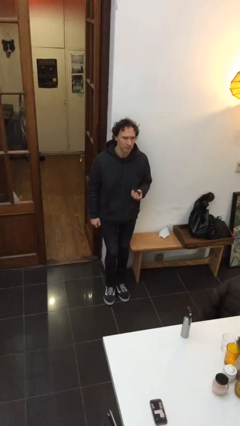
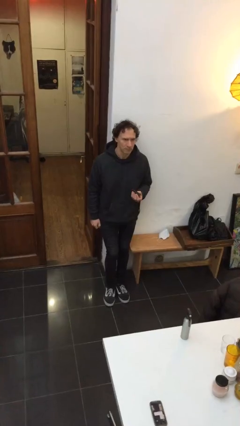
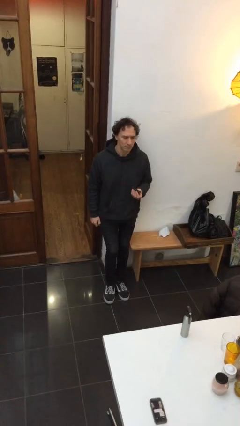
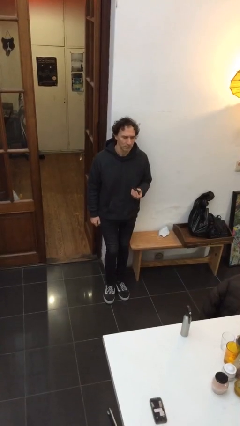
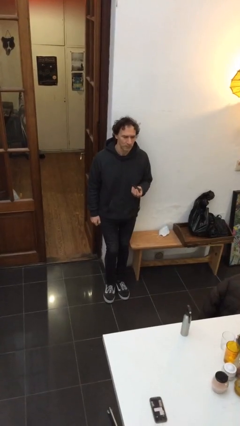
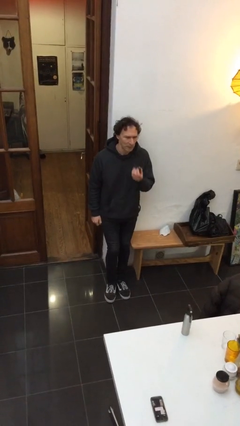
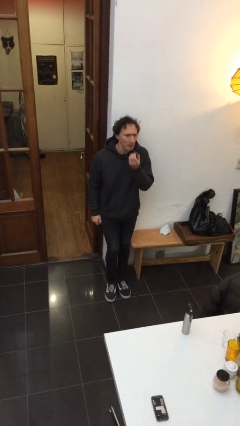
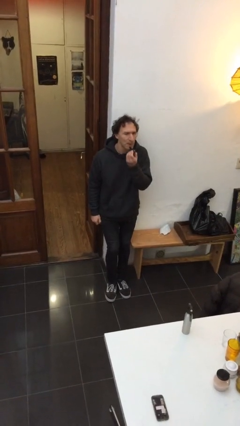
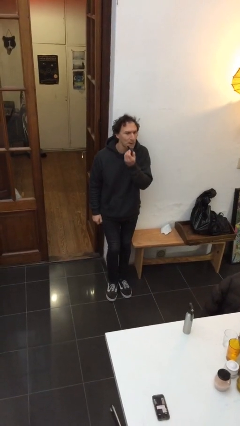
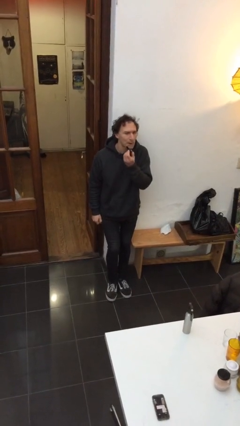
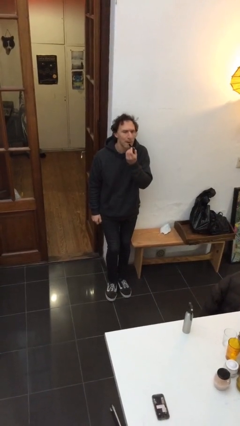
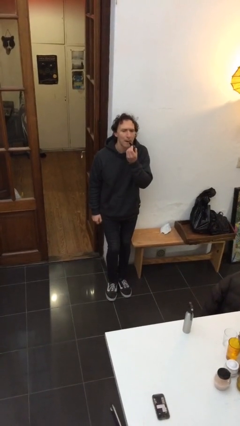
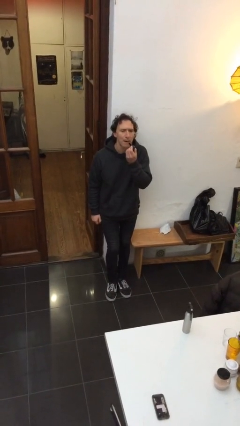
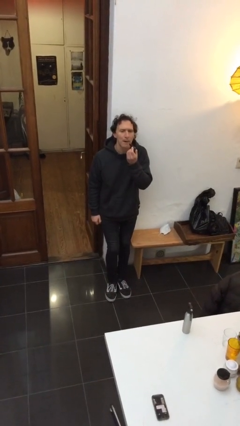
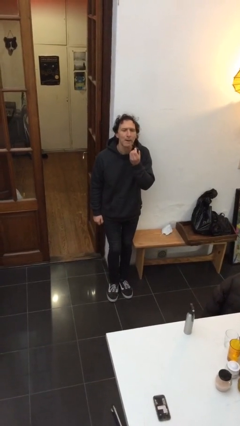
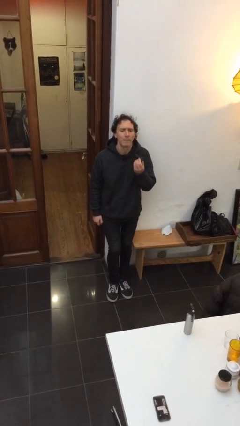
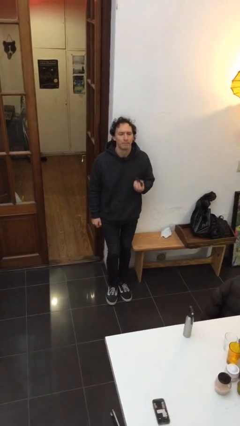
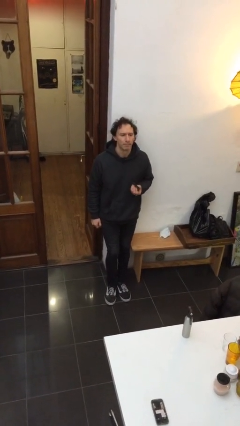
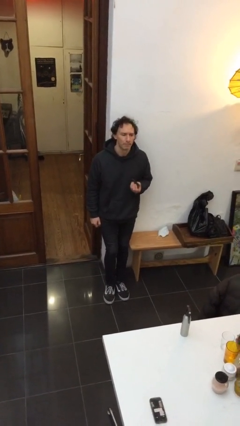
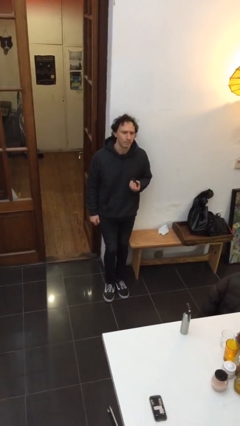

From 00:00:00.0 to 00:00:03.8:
person applies lip makeup

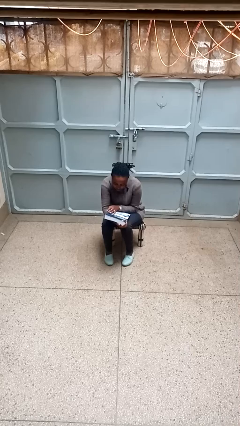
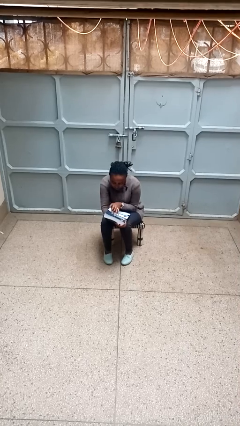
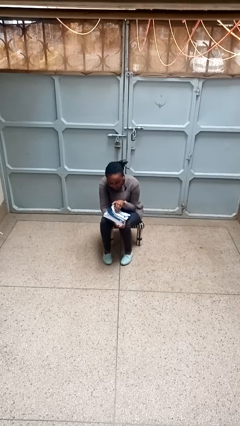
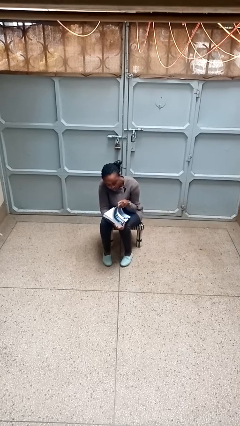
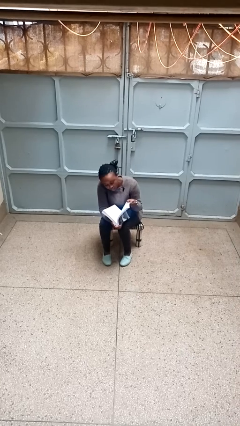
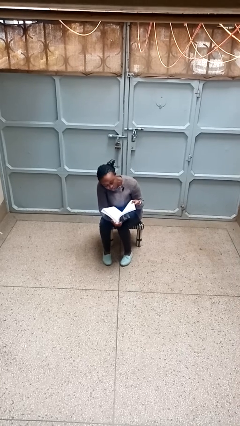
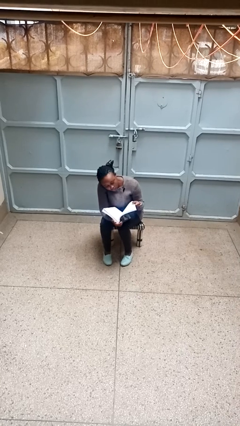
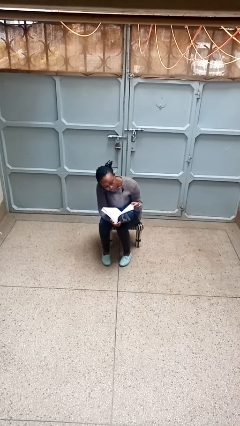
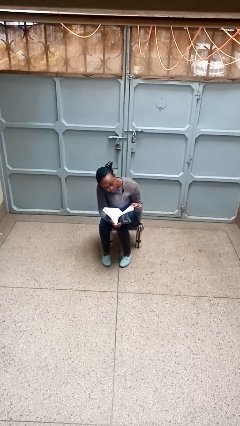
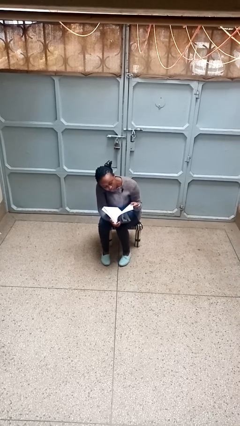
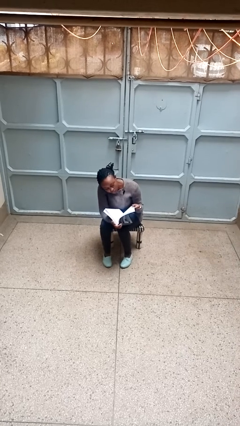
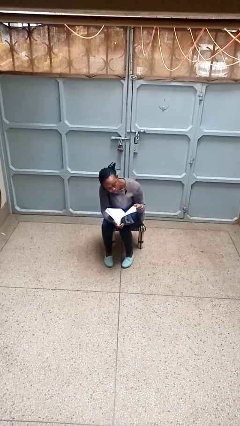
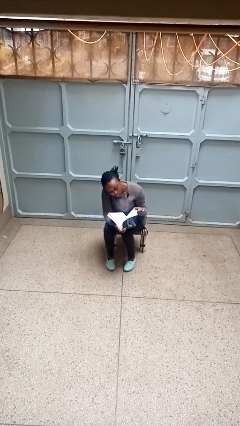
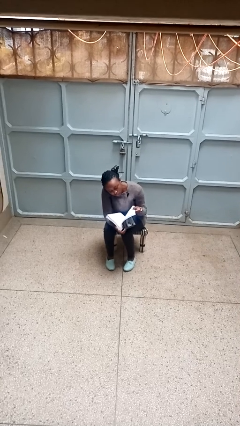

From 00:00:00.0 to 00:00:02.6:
person reads book

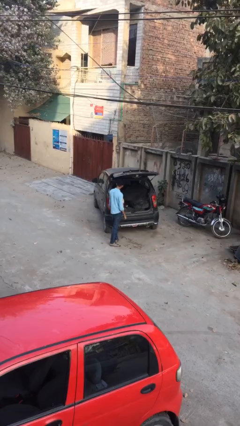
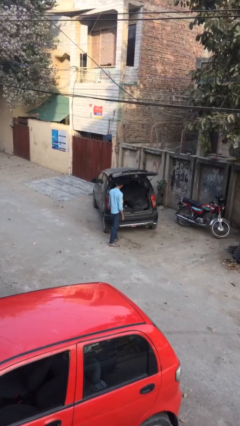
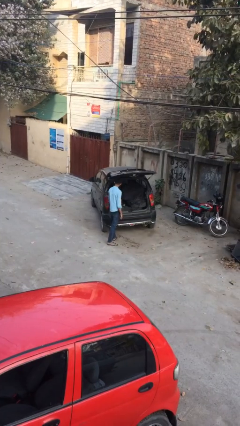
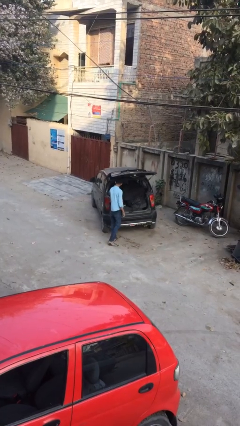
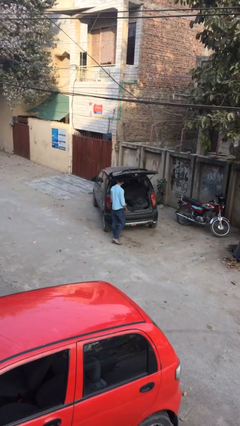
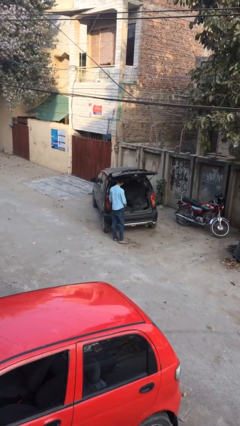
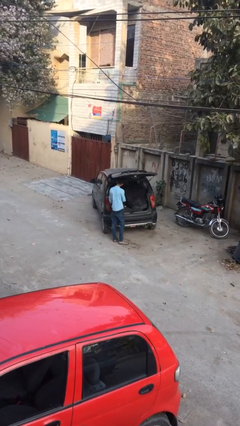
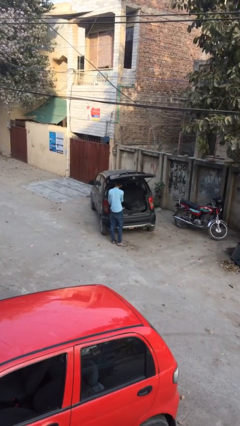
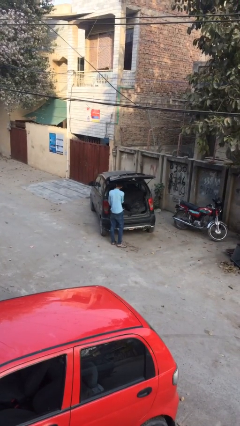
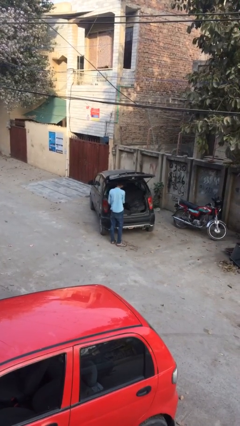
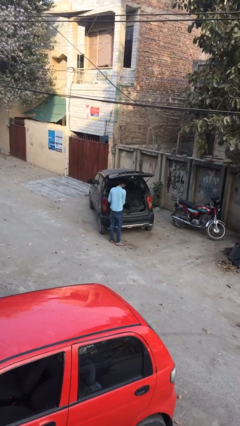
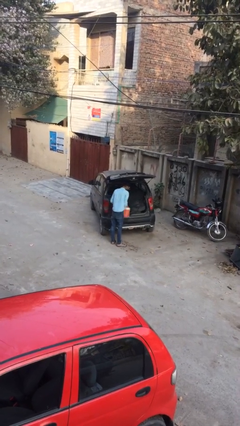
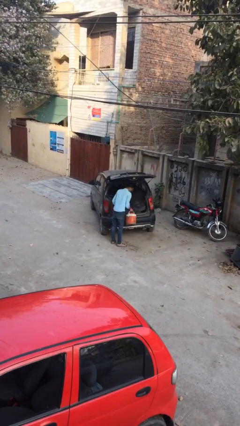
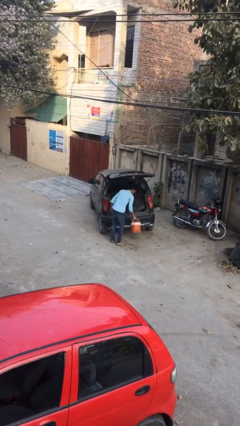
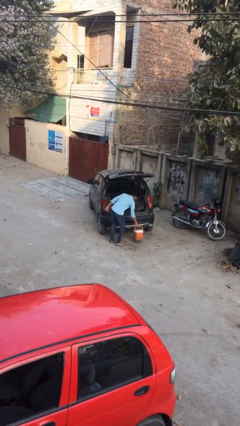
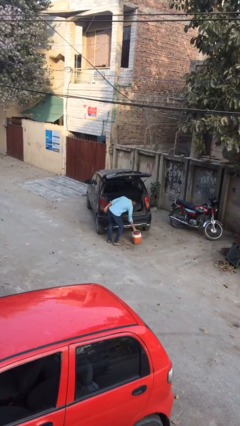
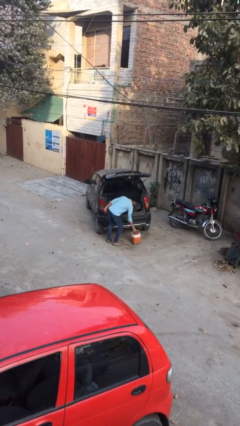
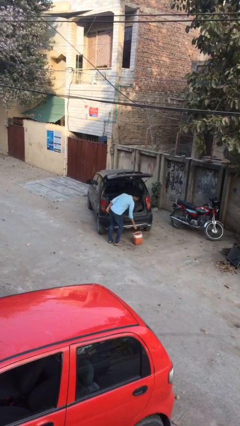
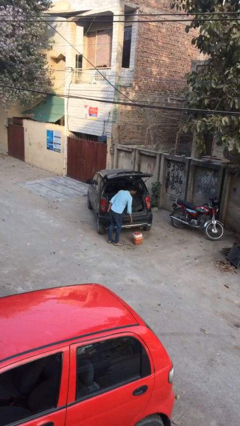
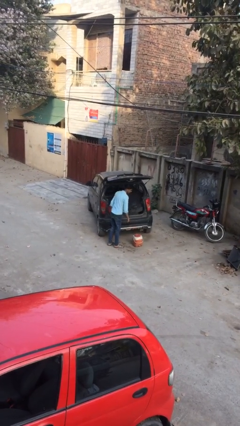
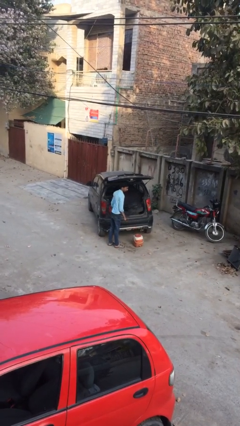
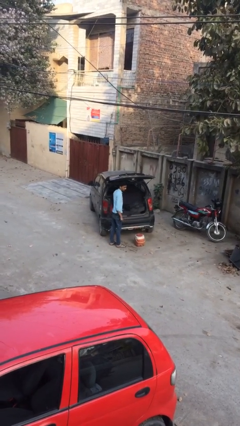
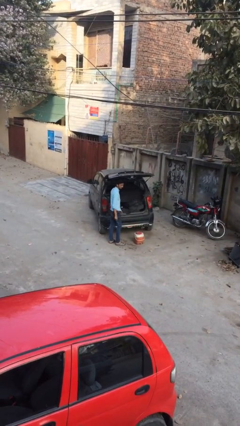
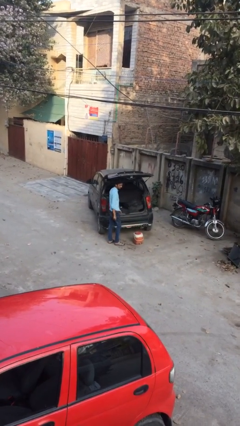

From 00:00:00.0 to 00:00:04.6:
person unloads car

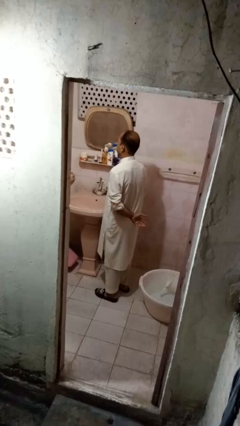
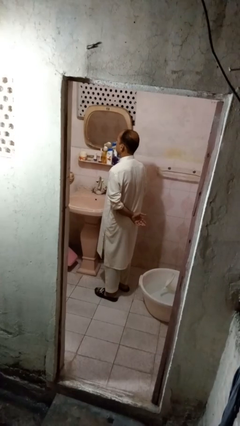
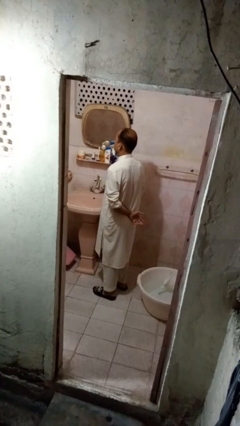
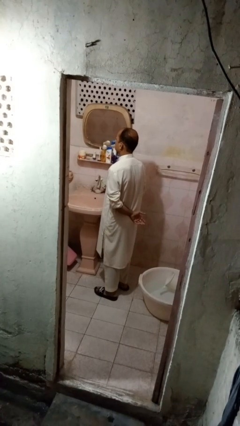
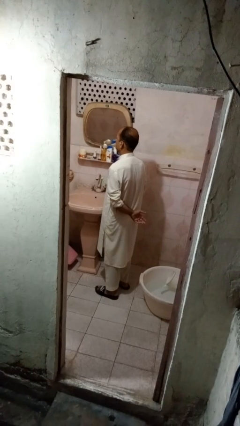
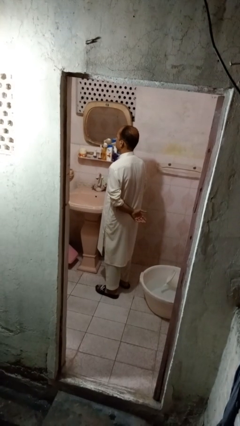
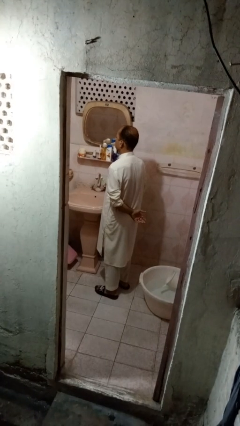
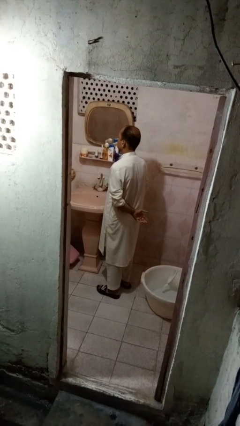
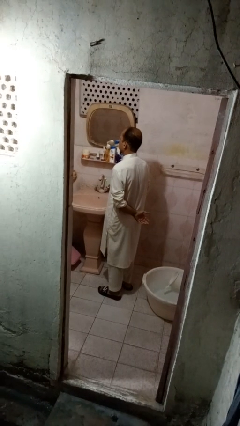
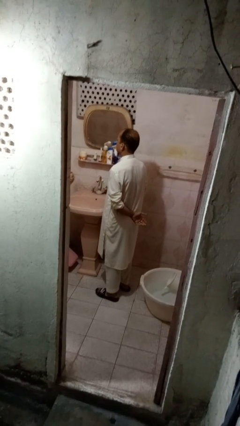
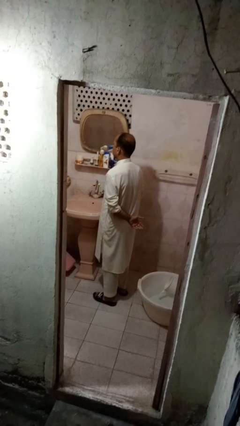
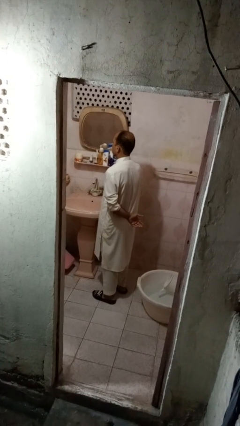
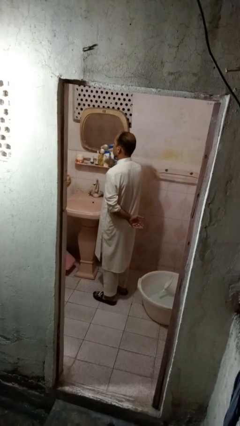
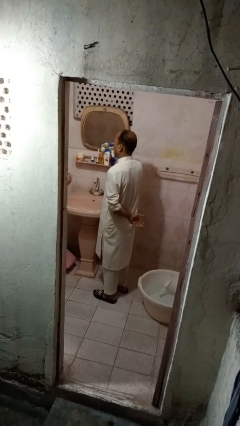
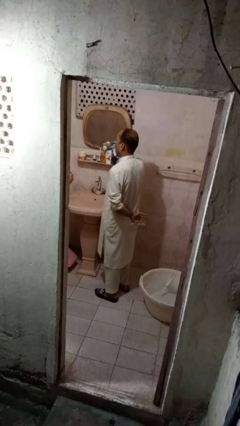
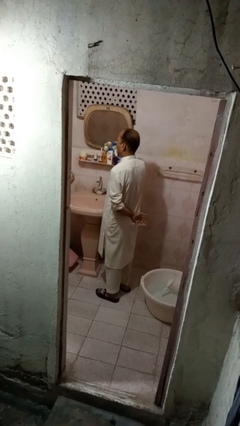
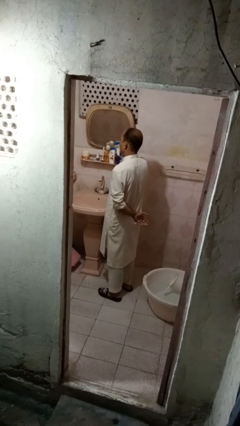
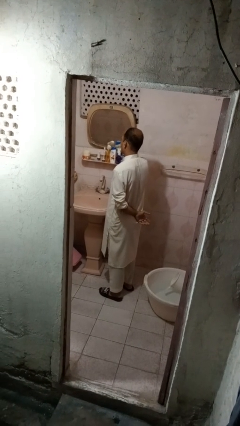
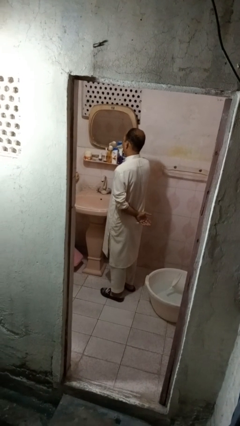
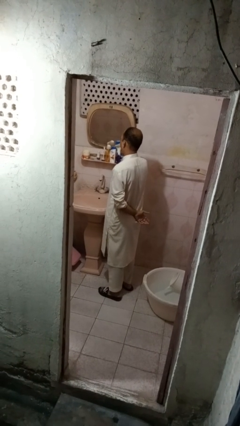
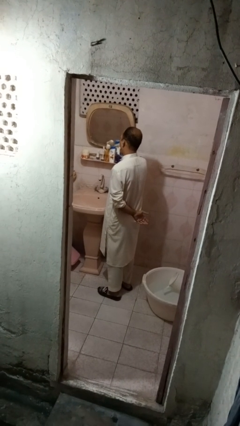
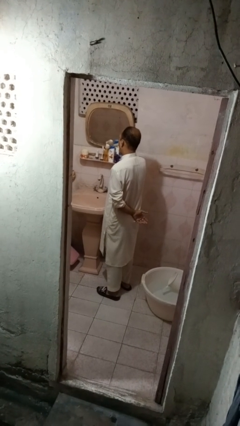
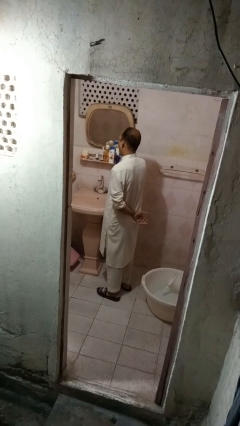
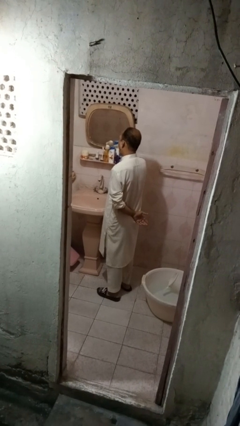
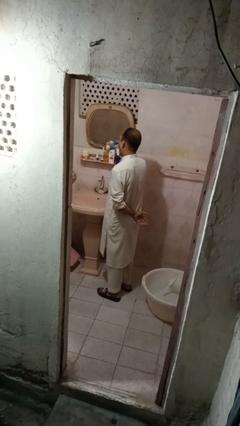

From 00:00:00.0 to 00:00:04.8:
person brushes teeth

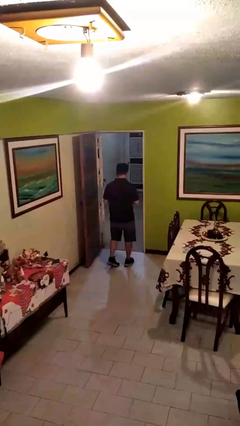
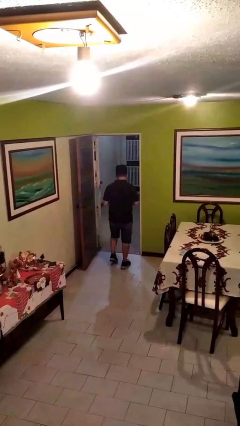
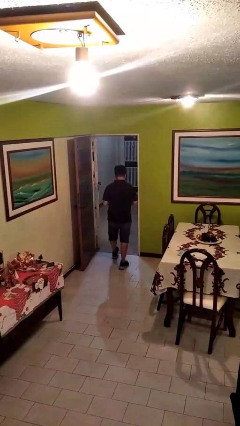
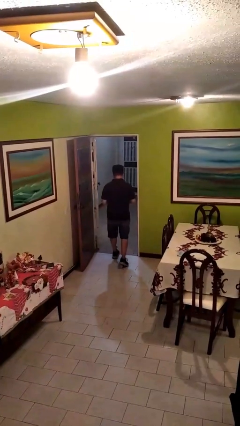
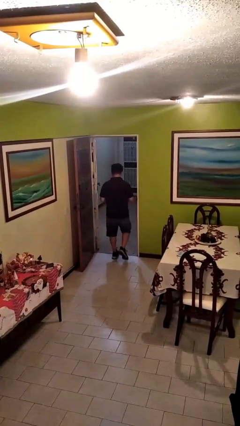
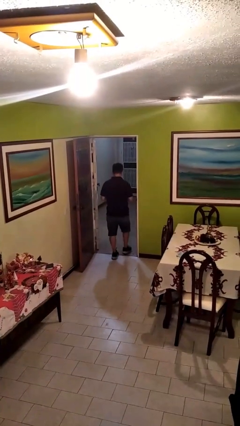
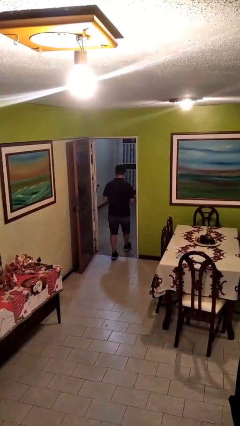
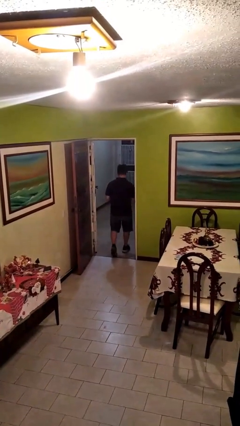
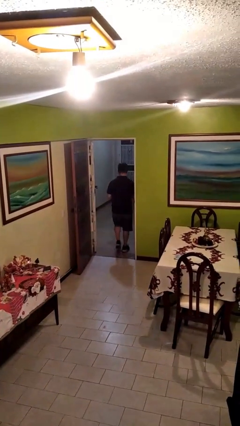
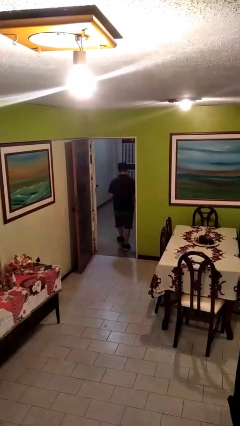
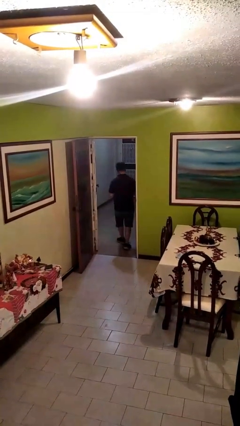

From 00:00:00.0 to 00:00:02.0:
person exits scene through structure
